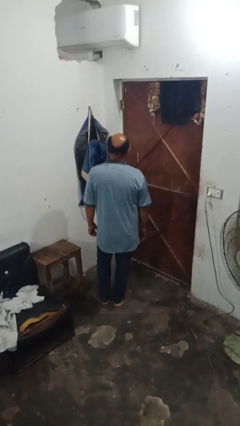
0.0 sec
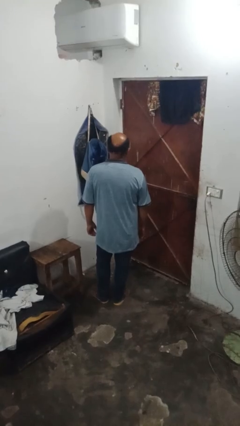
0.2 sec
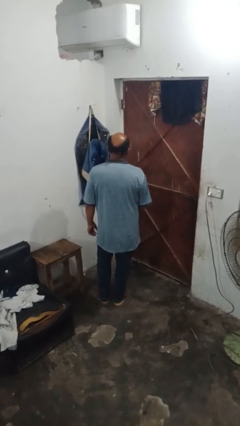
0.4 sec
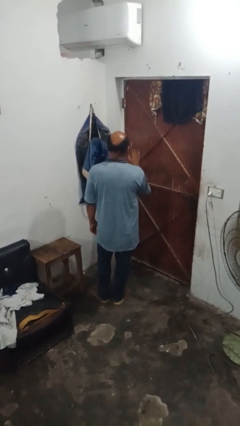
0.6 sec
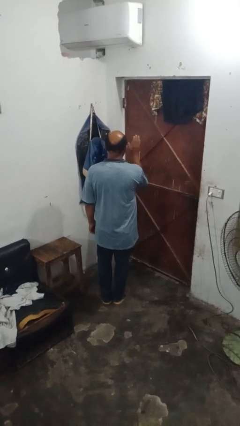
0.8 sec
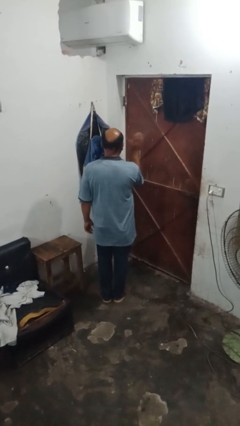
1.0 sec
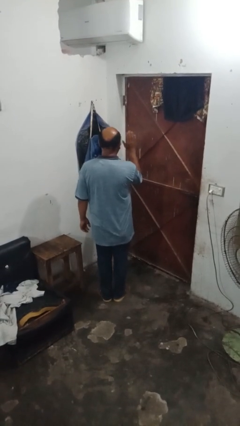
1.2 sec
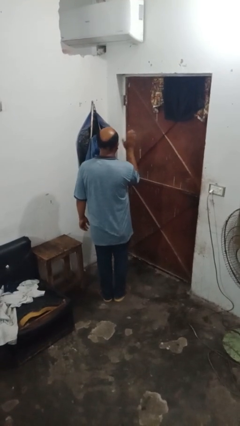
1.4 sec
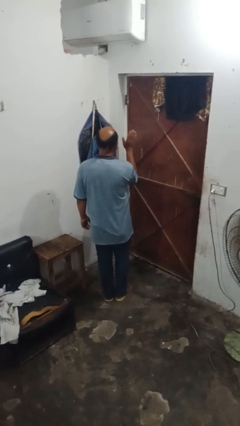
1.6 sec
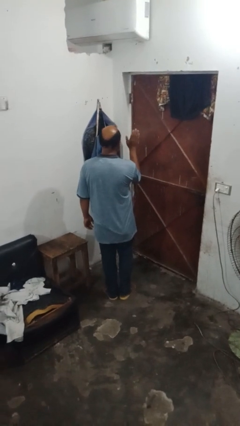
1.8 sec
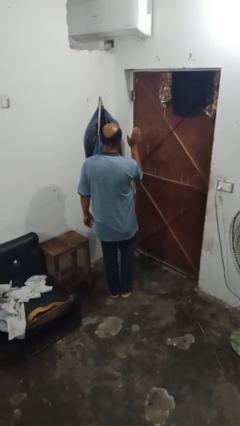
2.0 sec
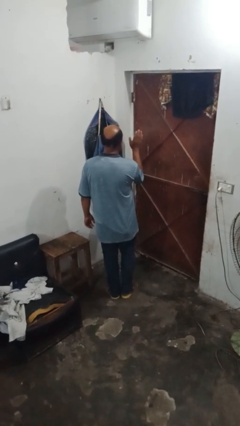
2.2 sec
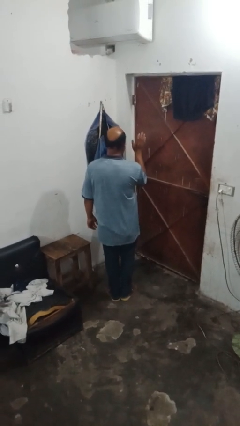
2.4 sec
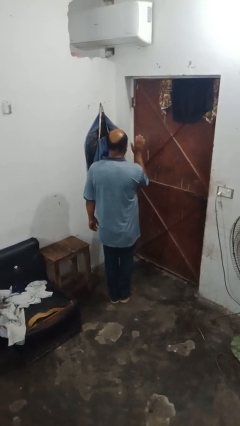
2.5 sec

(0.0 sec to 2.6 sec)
person waves hand over object

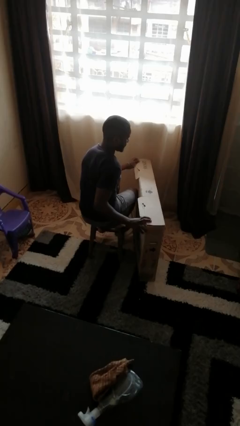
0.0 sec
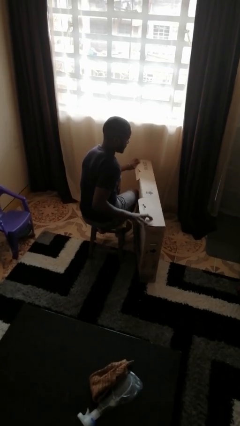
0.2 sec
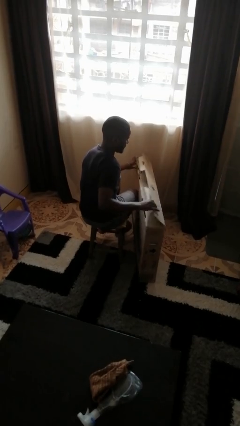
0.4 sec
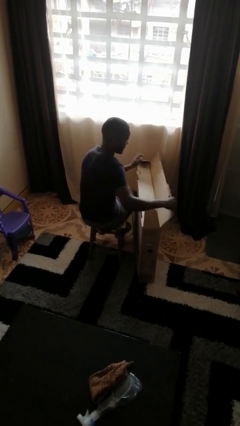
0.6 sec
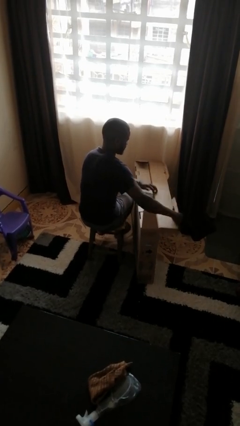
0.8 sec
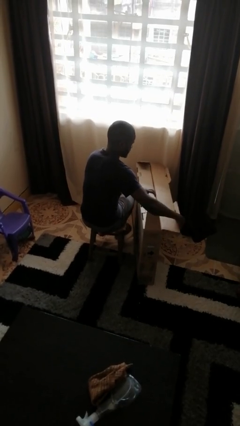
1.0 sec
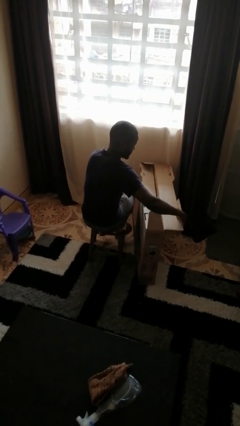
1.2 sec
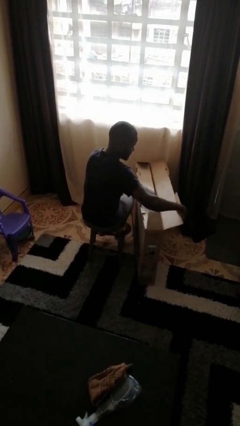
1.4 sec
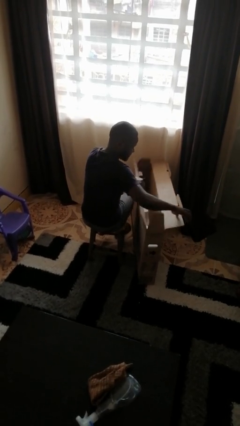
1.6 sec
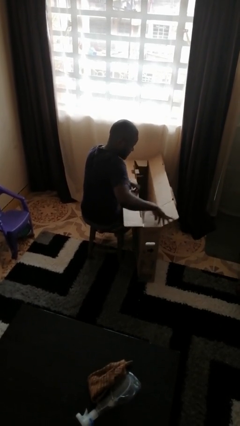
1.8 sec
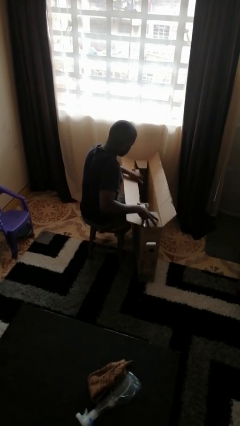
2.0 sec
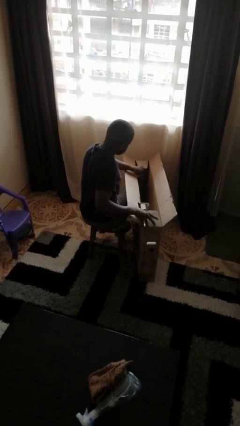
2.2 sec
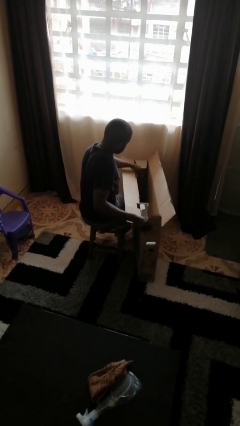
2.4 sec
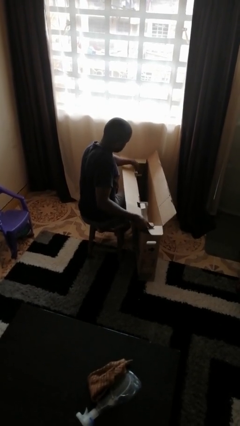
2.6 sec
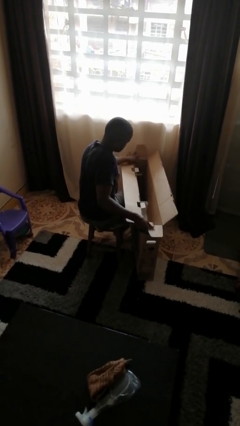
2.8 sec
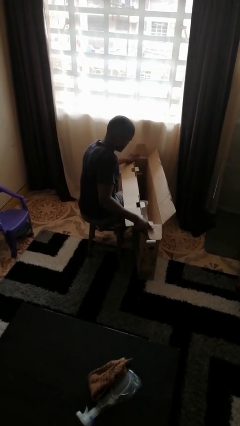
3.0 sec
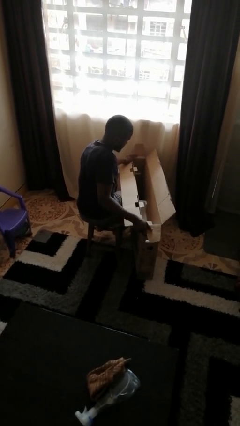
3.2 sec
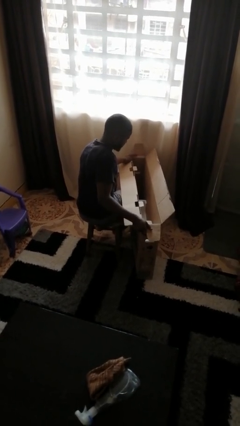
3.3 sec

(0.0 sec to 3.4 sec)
person opens box

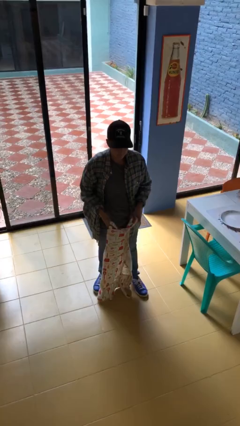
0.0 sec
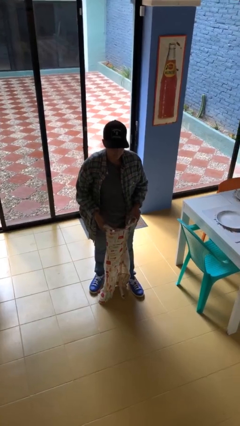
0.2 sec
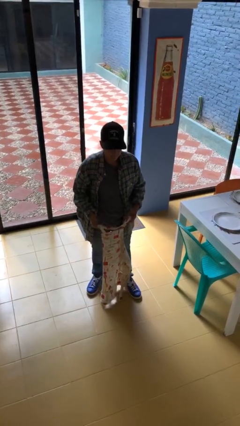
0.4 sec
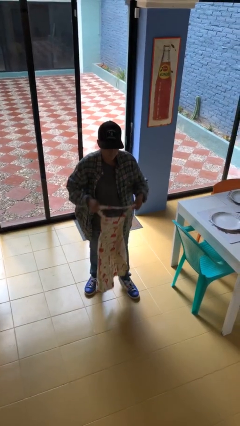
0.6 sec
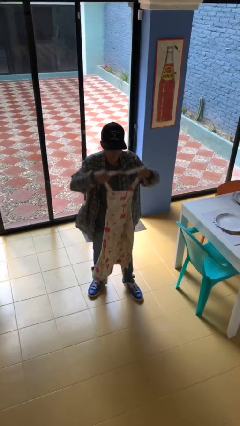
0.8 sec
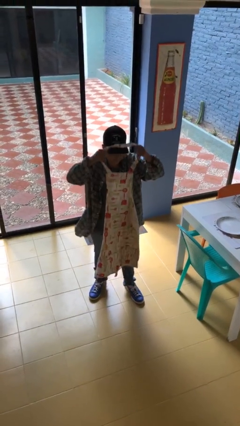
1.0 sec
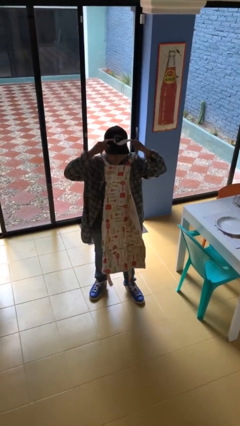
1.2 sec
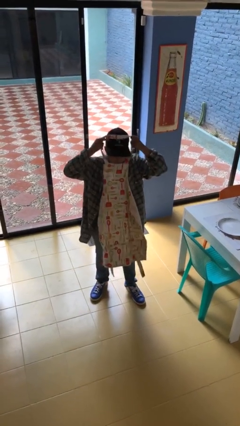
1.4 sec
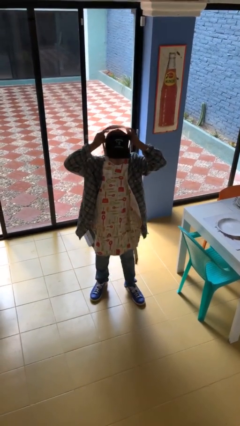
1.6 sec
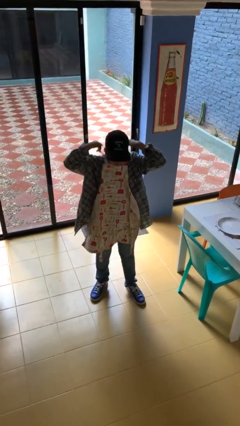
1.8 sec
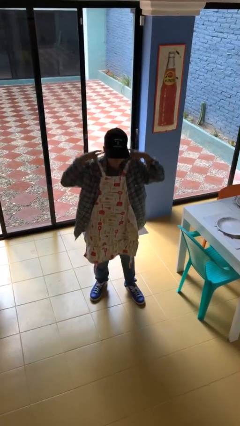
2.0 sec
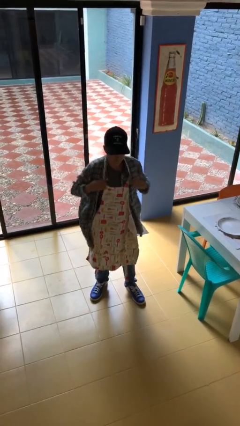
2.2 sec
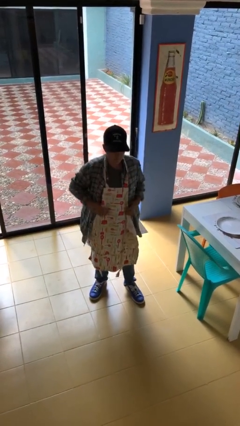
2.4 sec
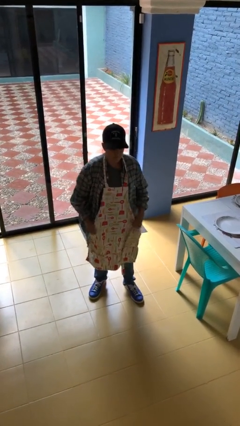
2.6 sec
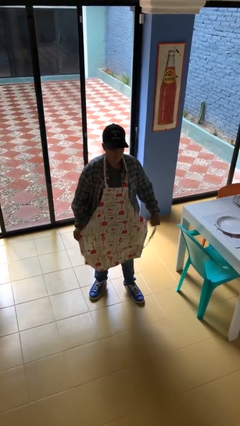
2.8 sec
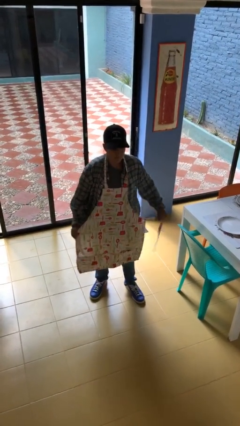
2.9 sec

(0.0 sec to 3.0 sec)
person puts on apron

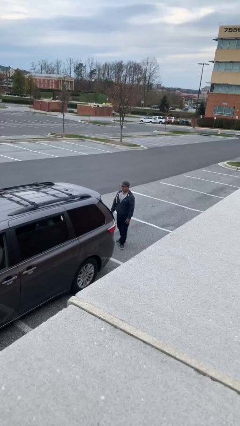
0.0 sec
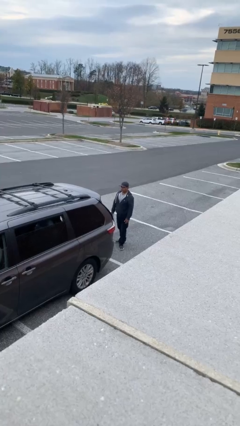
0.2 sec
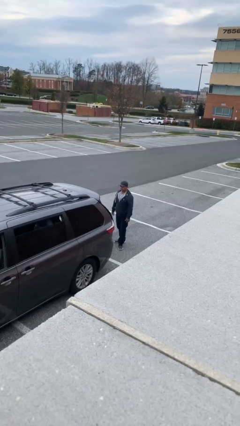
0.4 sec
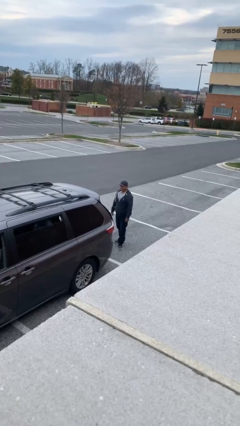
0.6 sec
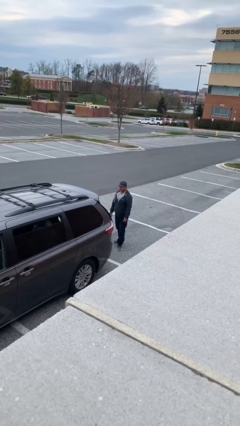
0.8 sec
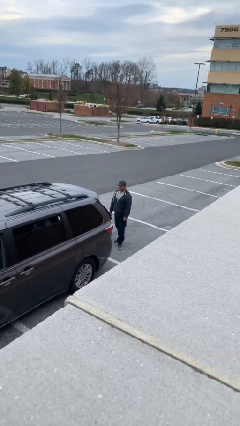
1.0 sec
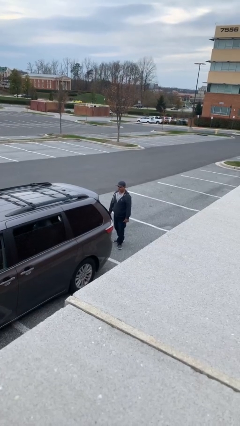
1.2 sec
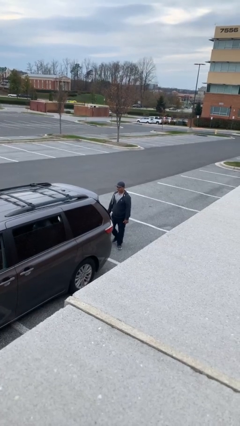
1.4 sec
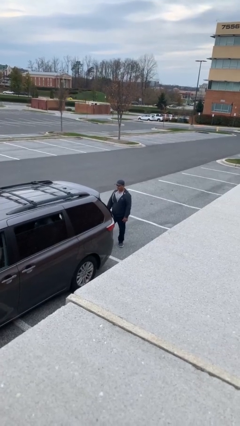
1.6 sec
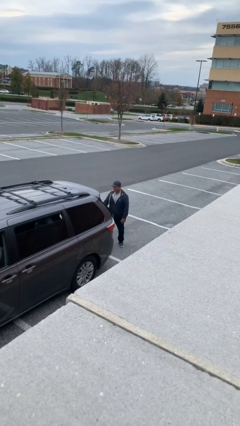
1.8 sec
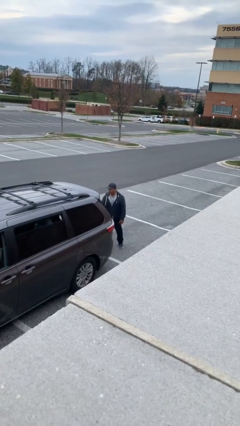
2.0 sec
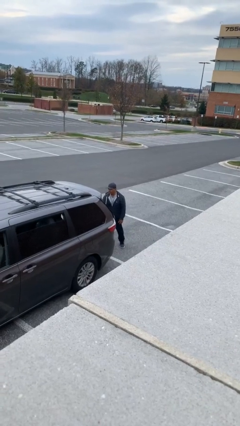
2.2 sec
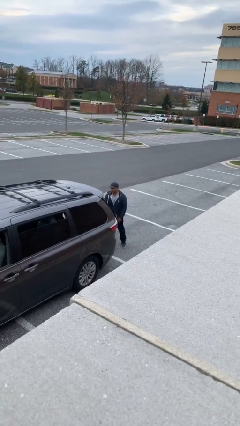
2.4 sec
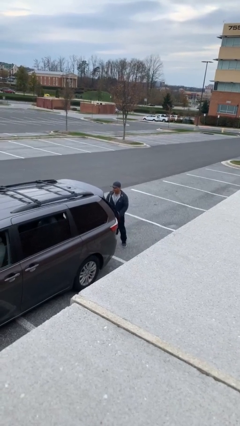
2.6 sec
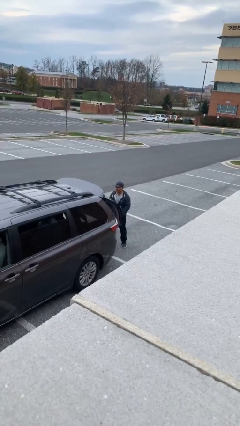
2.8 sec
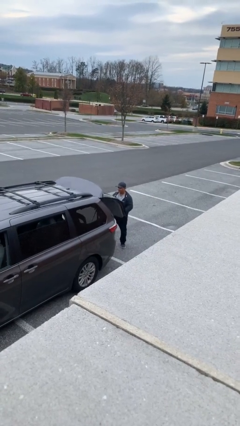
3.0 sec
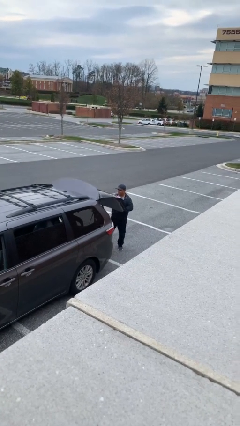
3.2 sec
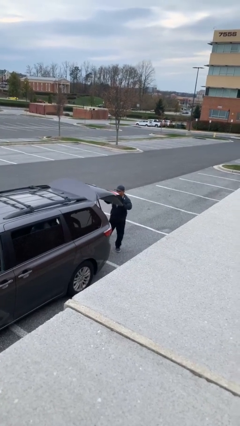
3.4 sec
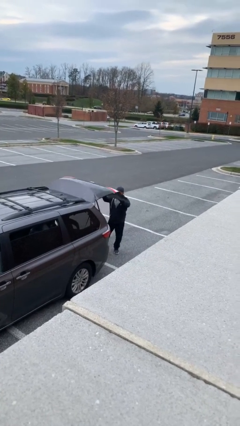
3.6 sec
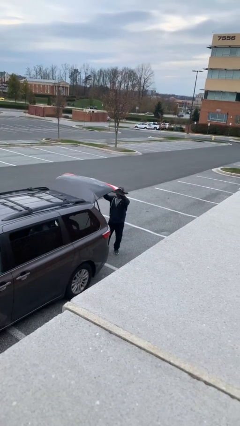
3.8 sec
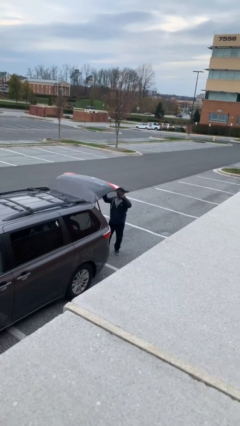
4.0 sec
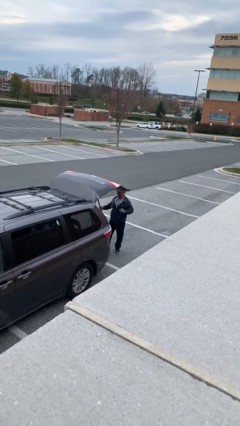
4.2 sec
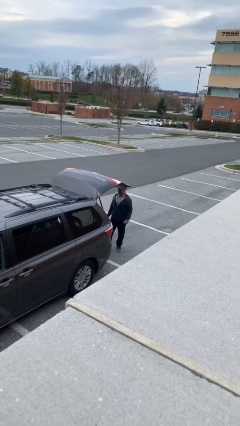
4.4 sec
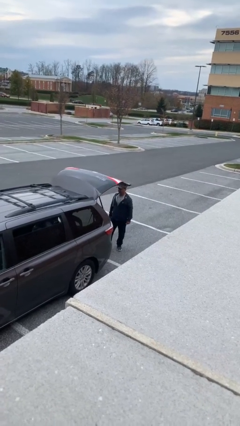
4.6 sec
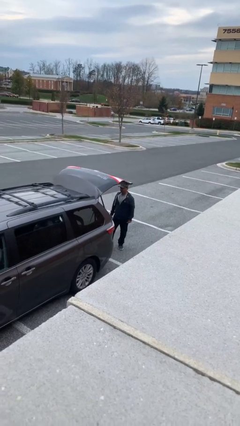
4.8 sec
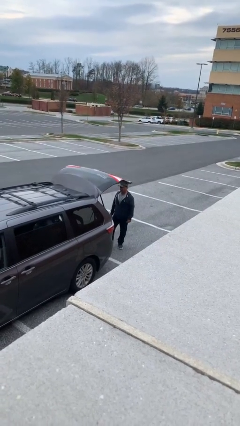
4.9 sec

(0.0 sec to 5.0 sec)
person opens car trunk

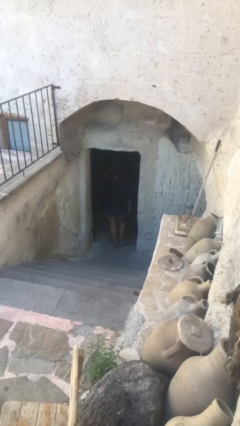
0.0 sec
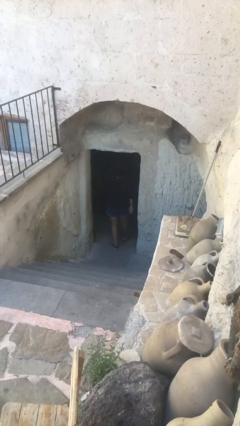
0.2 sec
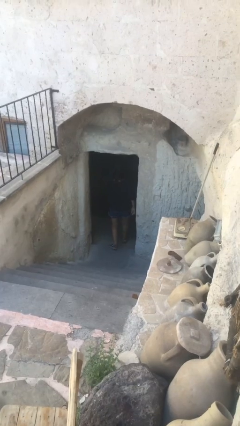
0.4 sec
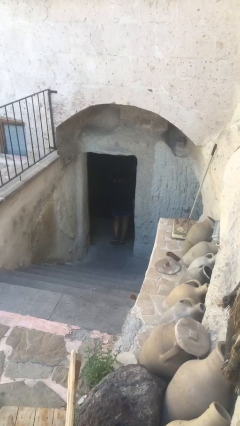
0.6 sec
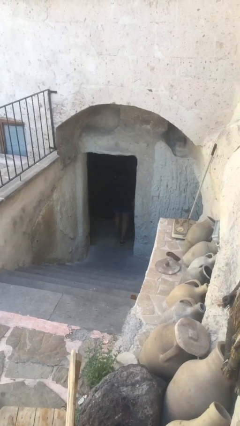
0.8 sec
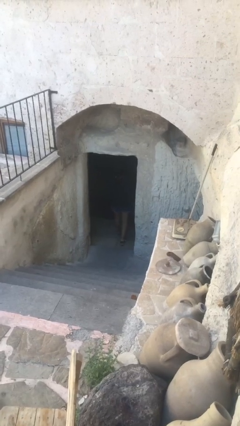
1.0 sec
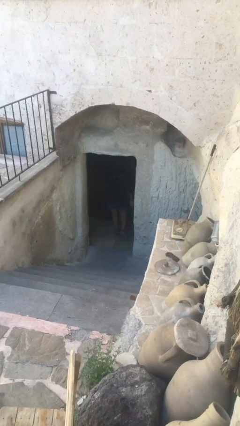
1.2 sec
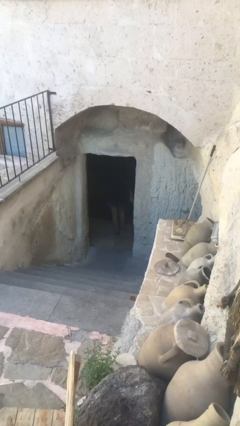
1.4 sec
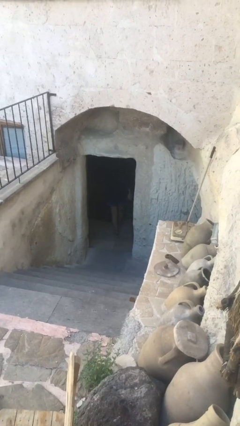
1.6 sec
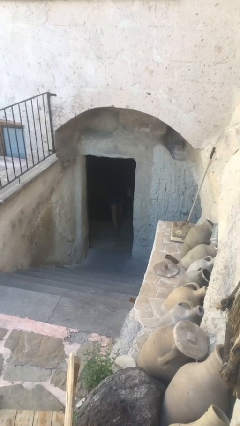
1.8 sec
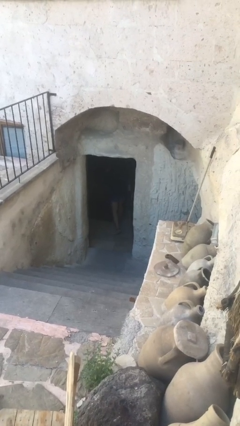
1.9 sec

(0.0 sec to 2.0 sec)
person exits scene through structure

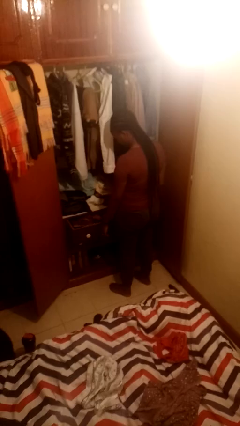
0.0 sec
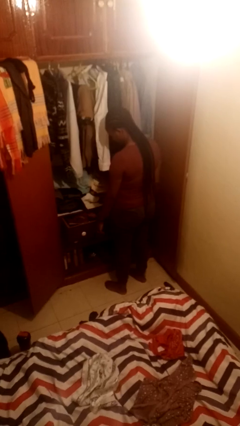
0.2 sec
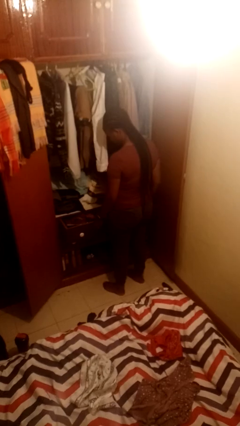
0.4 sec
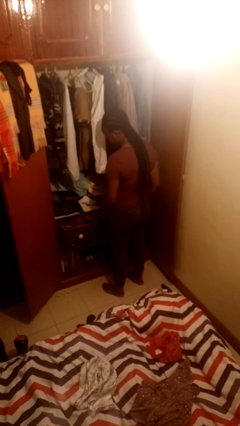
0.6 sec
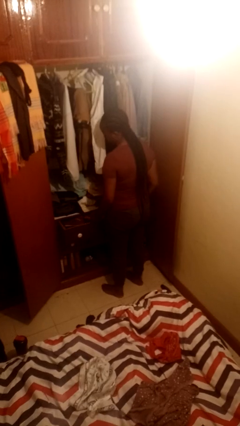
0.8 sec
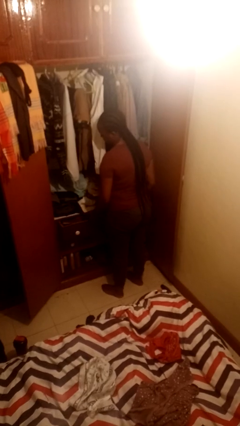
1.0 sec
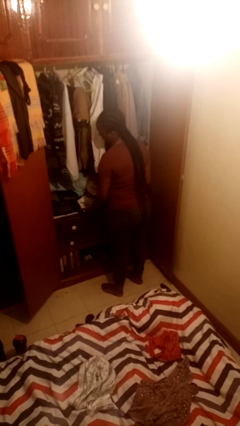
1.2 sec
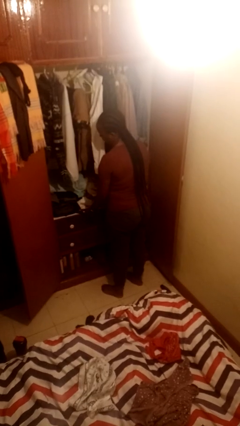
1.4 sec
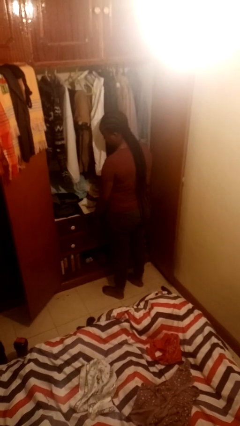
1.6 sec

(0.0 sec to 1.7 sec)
person closes dresser drawer
